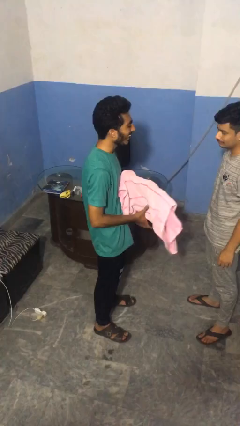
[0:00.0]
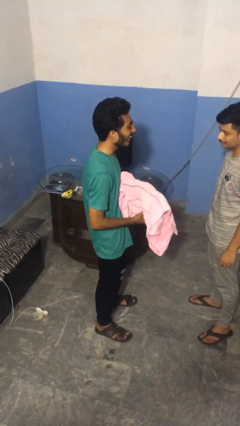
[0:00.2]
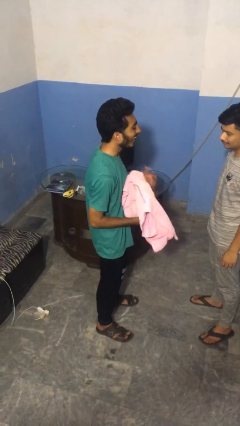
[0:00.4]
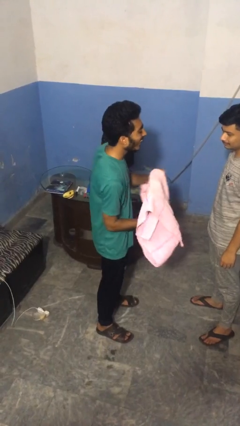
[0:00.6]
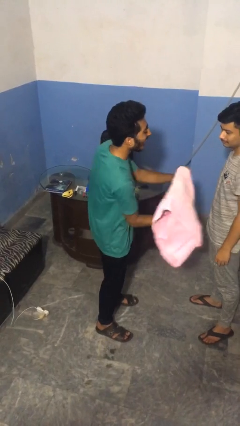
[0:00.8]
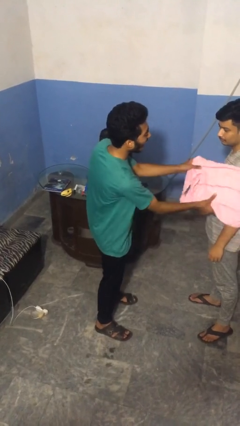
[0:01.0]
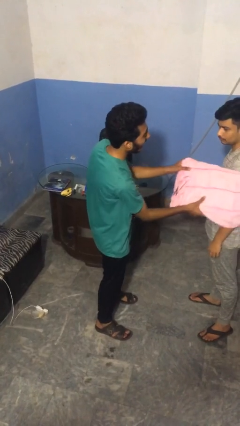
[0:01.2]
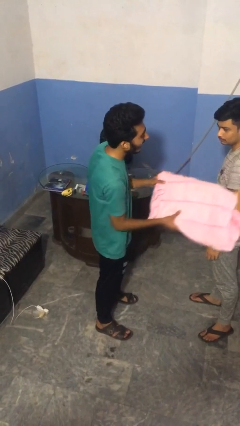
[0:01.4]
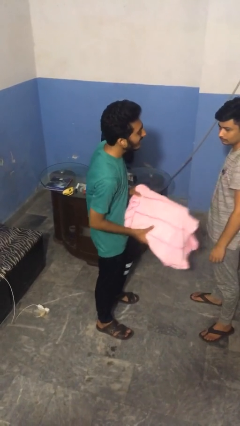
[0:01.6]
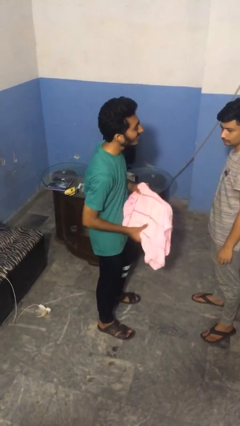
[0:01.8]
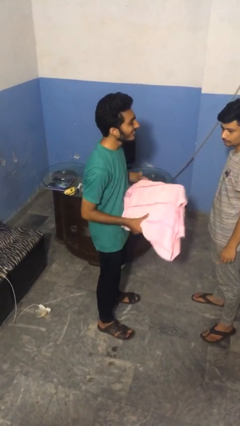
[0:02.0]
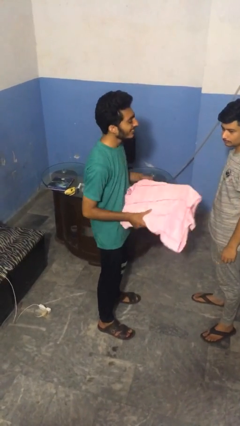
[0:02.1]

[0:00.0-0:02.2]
person hits person with pillow

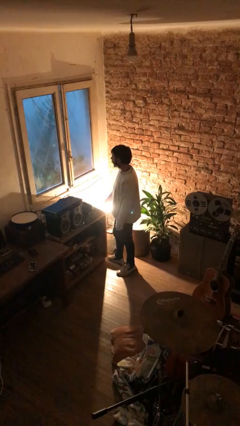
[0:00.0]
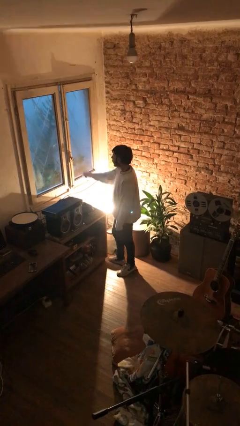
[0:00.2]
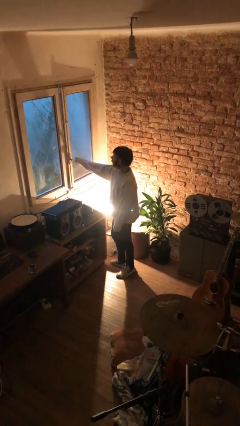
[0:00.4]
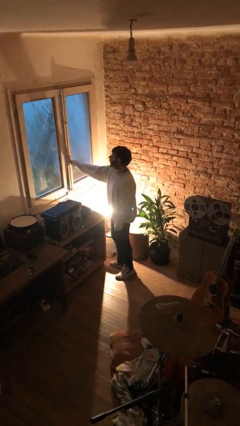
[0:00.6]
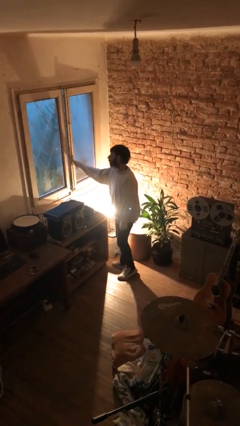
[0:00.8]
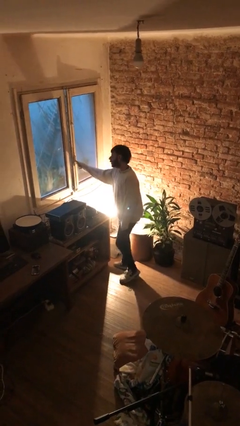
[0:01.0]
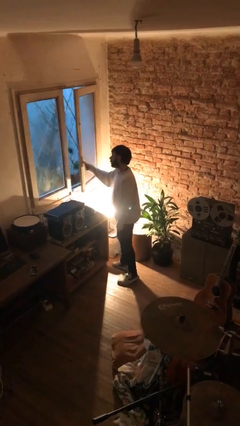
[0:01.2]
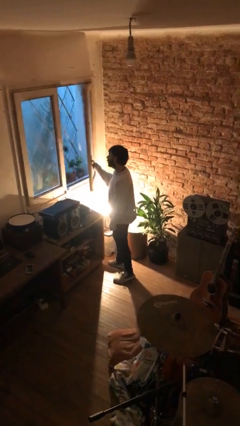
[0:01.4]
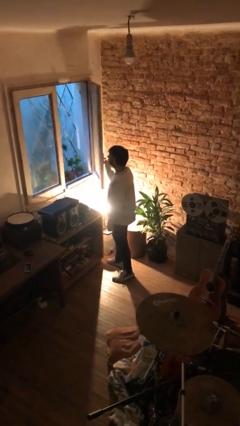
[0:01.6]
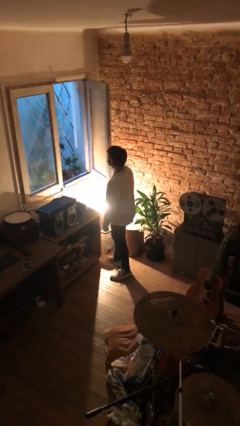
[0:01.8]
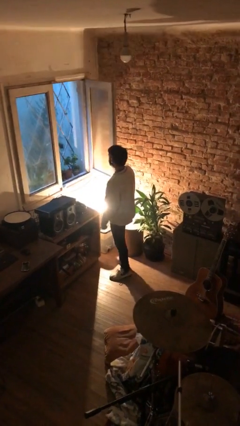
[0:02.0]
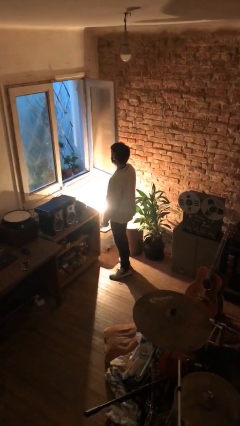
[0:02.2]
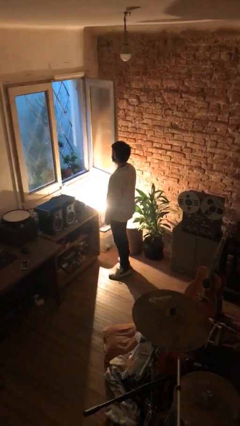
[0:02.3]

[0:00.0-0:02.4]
person opens home window

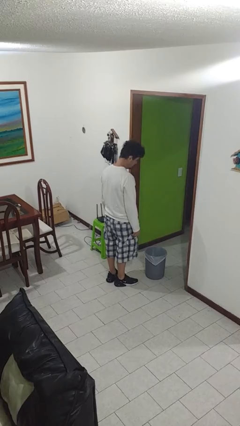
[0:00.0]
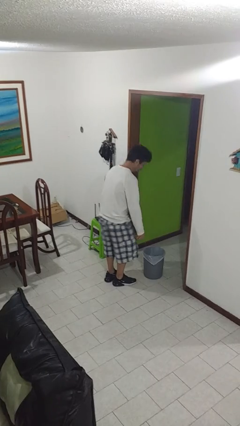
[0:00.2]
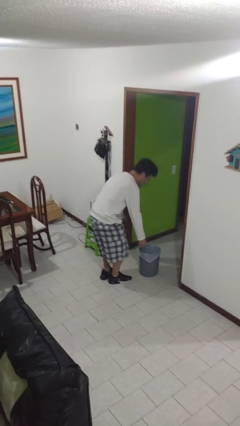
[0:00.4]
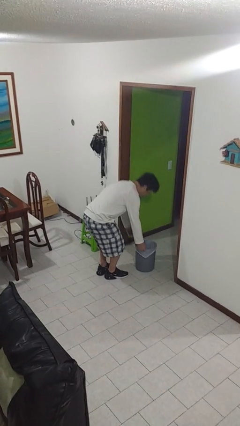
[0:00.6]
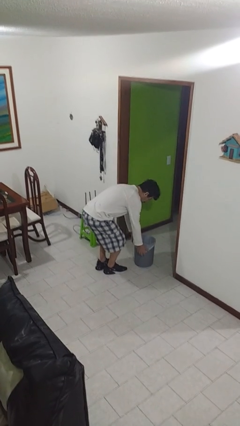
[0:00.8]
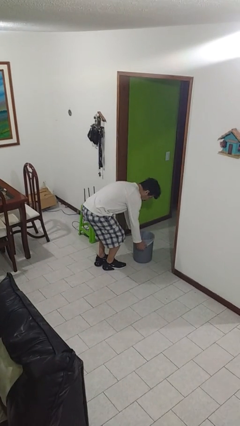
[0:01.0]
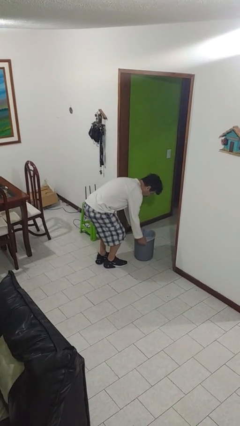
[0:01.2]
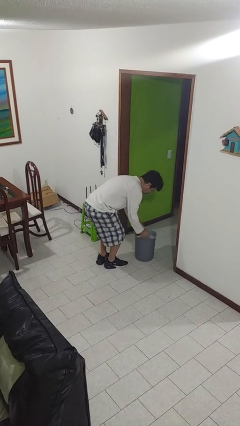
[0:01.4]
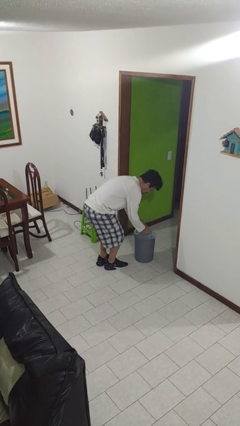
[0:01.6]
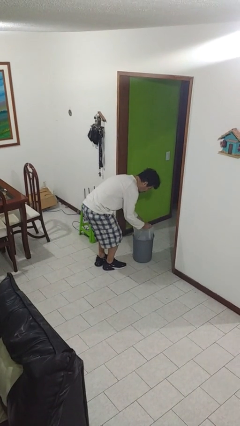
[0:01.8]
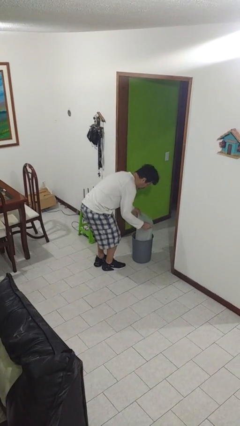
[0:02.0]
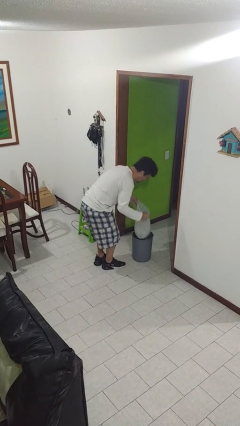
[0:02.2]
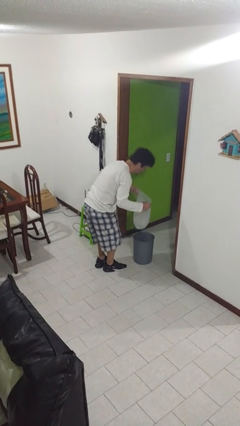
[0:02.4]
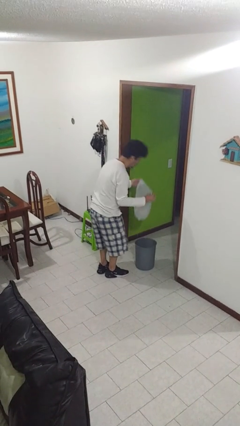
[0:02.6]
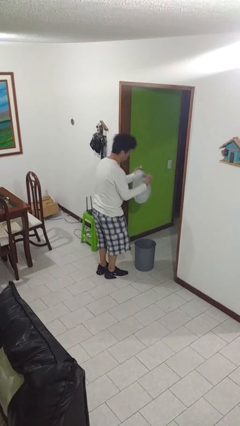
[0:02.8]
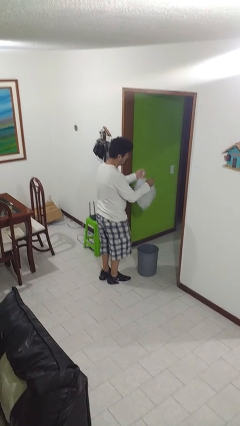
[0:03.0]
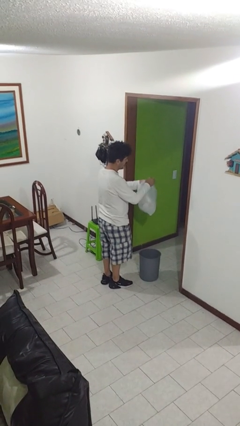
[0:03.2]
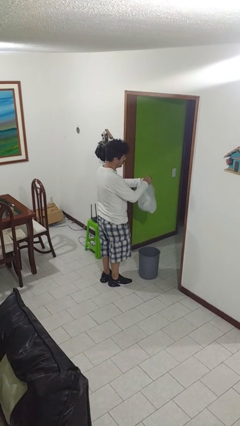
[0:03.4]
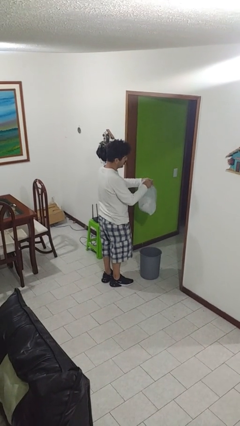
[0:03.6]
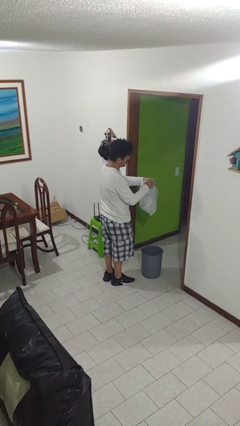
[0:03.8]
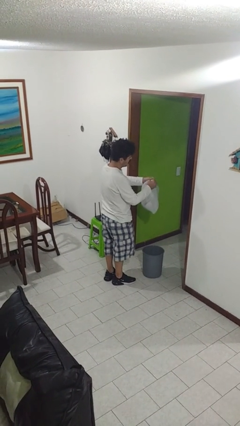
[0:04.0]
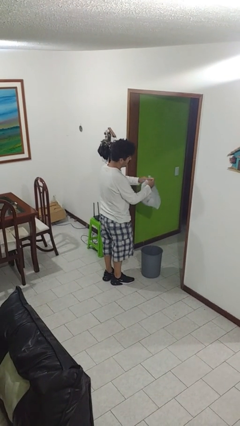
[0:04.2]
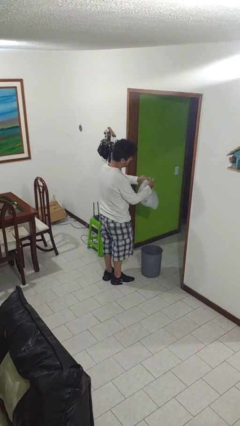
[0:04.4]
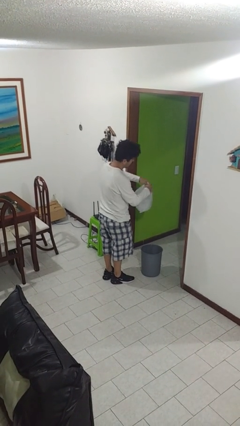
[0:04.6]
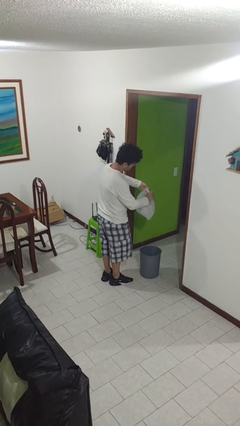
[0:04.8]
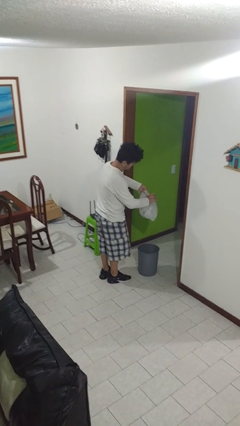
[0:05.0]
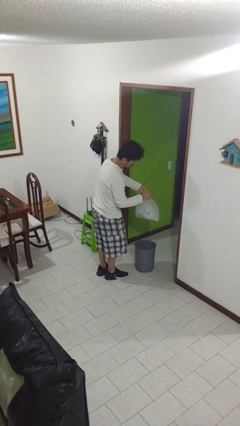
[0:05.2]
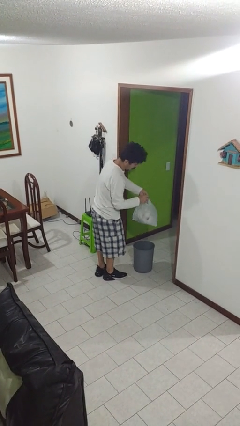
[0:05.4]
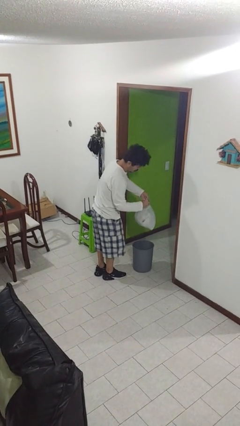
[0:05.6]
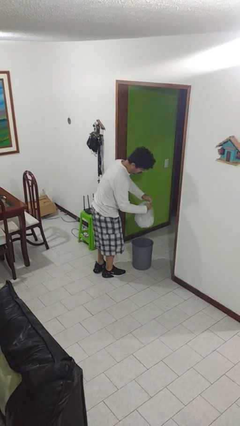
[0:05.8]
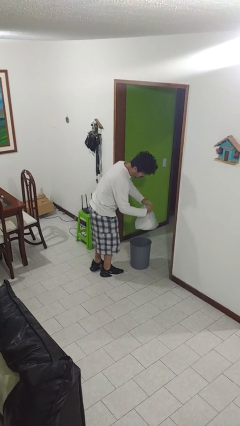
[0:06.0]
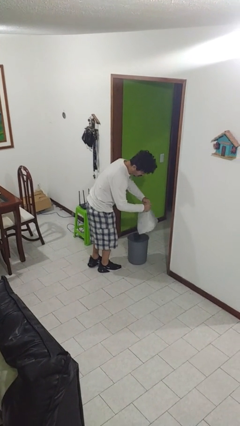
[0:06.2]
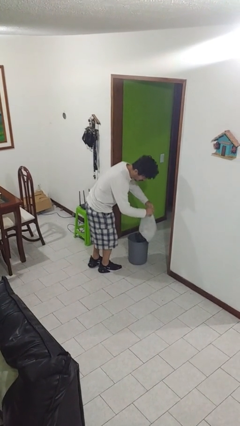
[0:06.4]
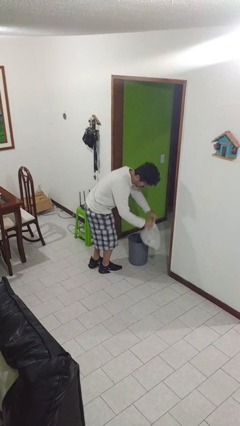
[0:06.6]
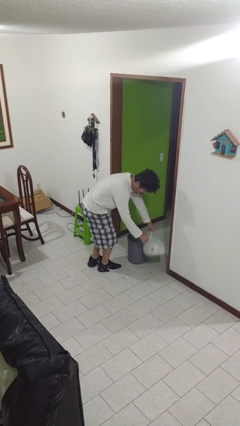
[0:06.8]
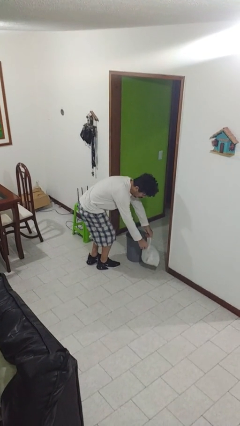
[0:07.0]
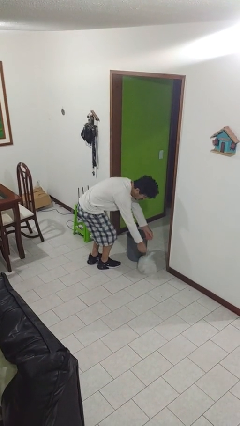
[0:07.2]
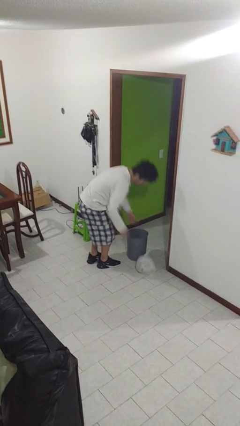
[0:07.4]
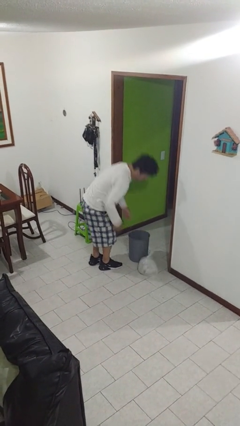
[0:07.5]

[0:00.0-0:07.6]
person removes trashbag from trashcan

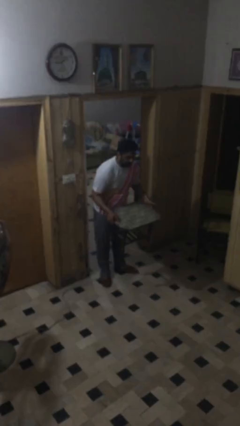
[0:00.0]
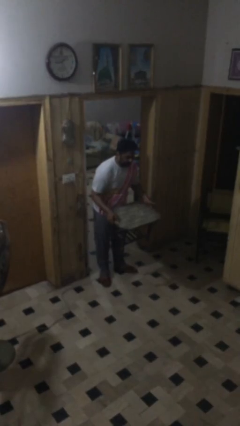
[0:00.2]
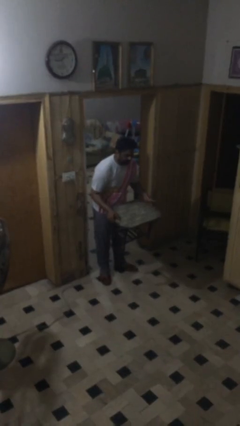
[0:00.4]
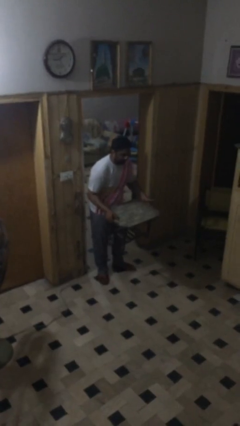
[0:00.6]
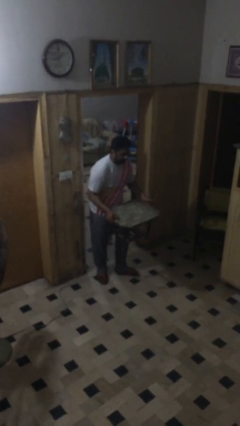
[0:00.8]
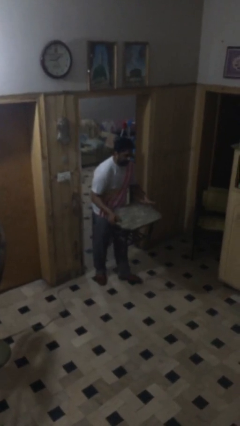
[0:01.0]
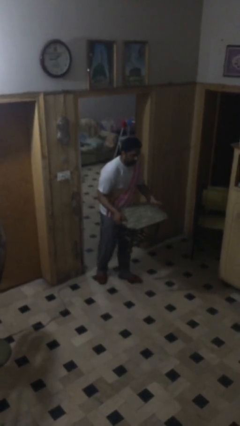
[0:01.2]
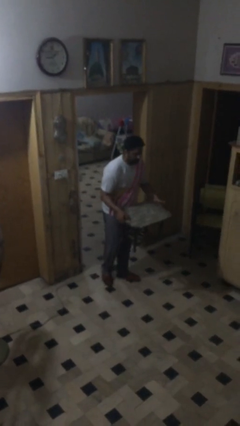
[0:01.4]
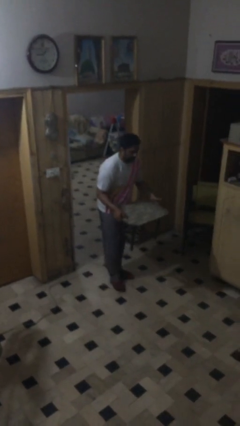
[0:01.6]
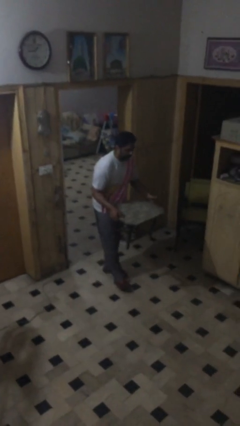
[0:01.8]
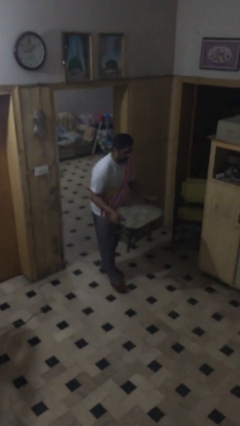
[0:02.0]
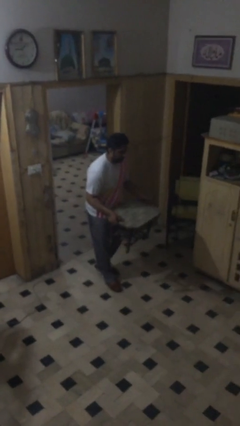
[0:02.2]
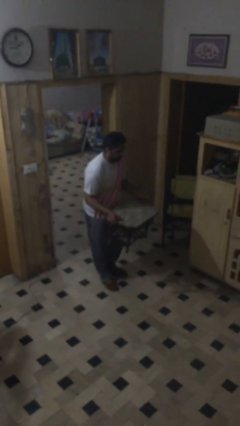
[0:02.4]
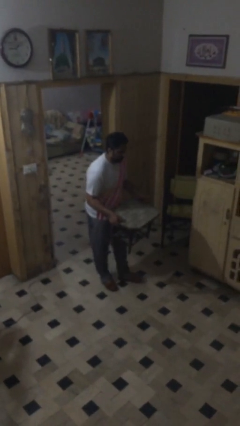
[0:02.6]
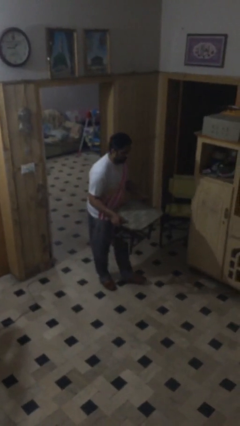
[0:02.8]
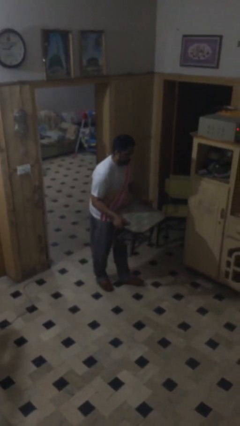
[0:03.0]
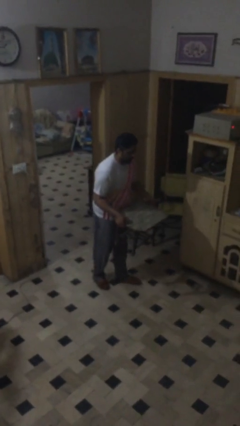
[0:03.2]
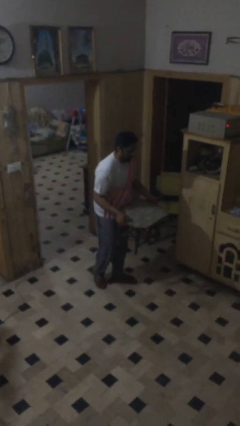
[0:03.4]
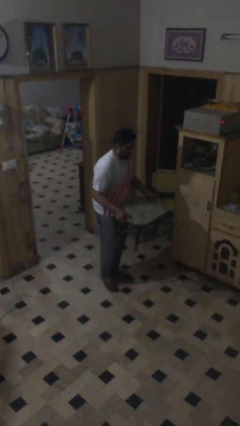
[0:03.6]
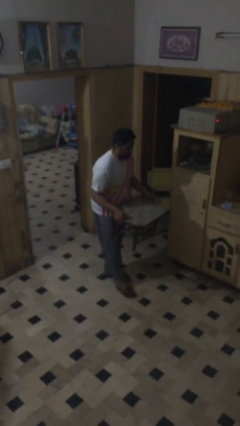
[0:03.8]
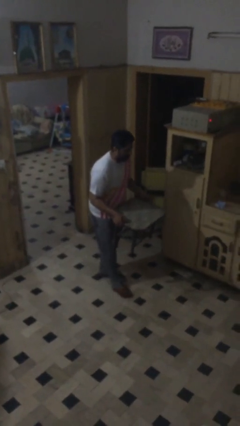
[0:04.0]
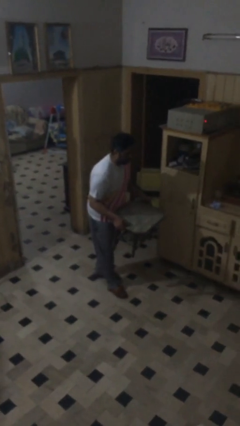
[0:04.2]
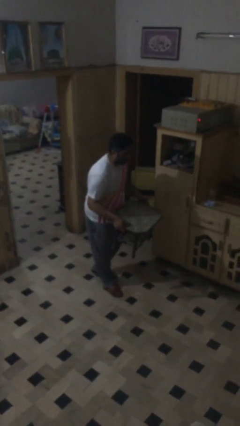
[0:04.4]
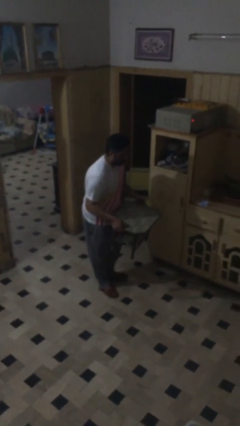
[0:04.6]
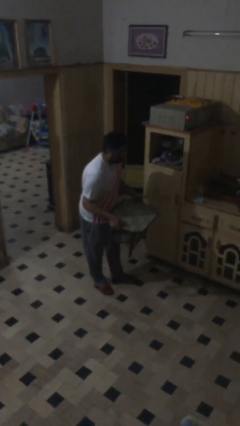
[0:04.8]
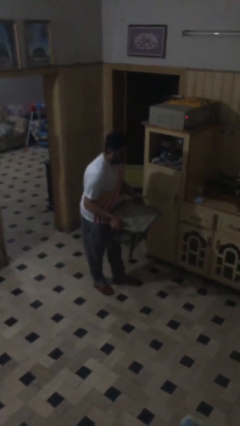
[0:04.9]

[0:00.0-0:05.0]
person carries heavy object

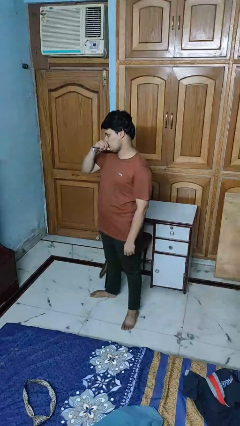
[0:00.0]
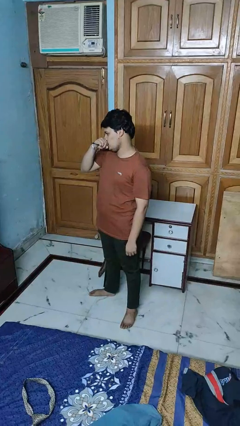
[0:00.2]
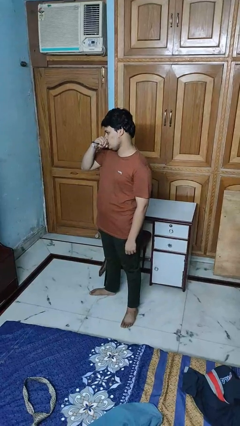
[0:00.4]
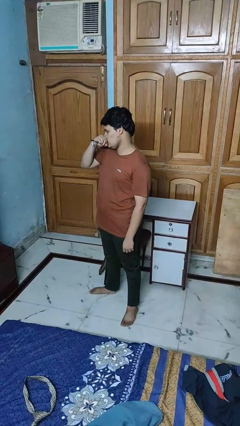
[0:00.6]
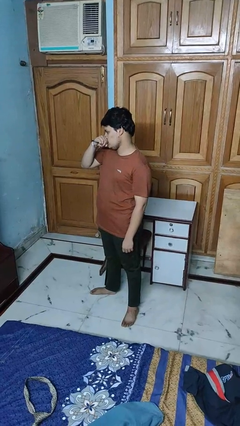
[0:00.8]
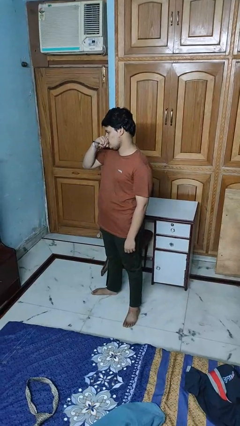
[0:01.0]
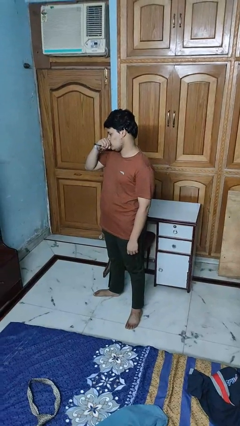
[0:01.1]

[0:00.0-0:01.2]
person vapes
